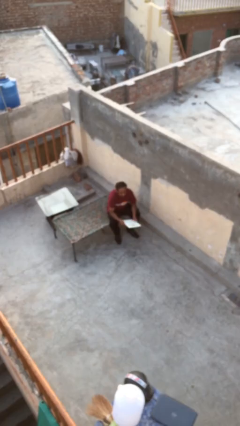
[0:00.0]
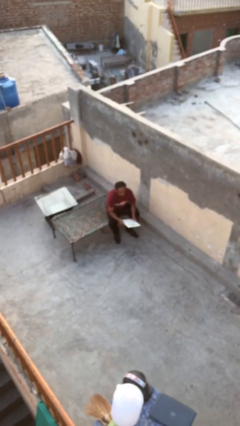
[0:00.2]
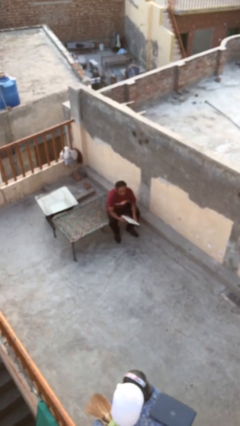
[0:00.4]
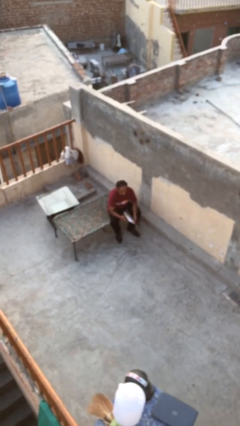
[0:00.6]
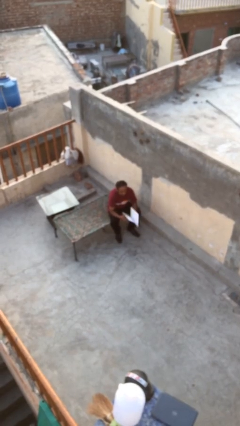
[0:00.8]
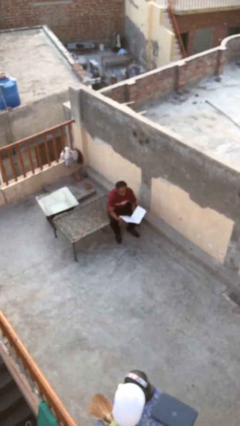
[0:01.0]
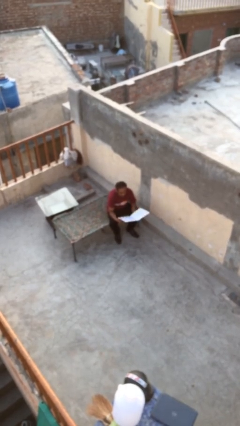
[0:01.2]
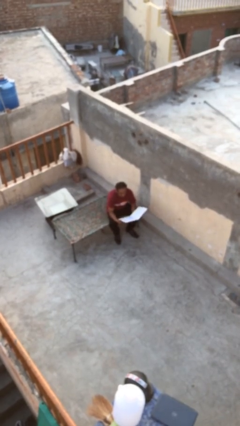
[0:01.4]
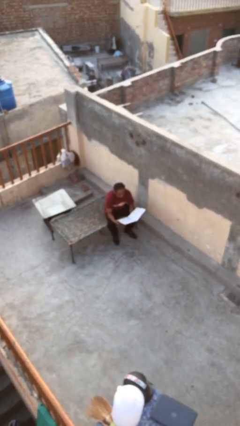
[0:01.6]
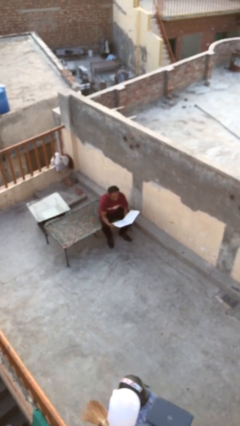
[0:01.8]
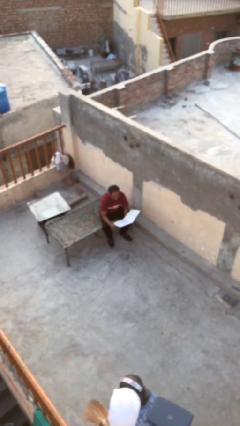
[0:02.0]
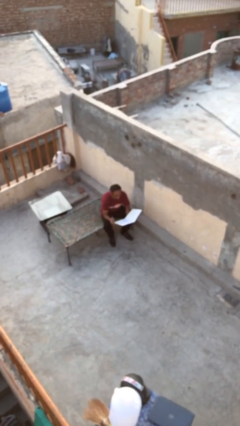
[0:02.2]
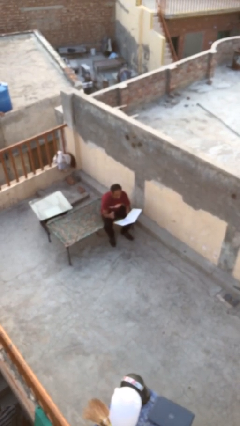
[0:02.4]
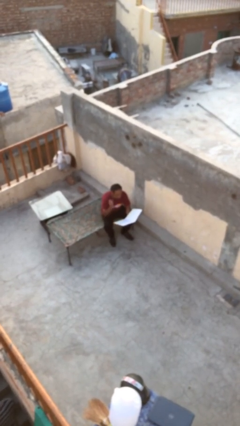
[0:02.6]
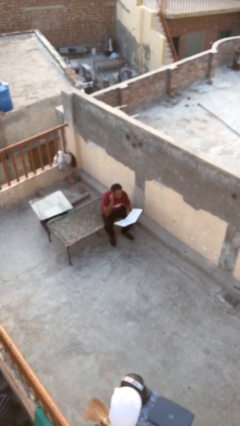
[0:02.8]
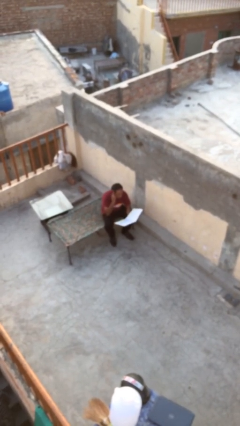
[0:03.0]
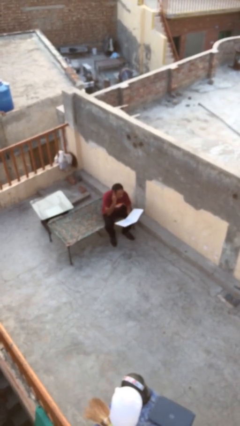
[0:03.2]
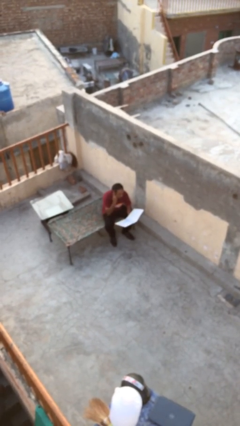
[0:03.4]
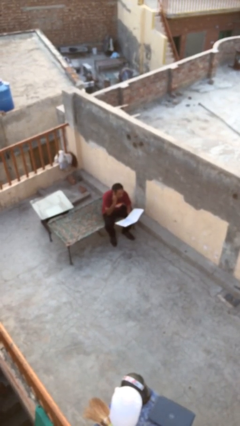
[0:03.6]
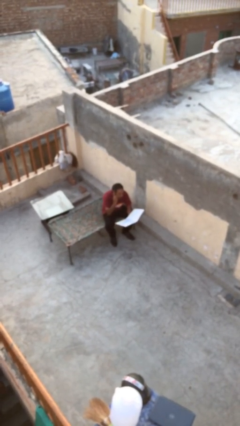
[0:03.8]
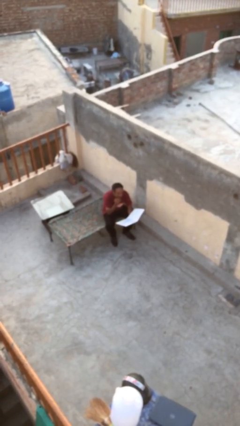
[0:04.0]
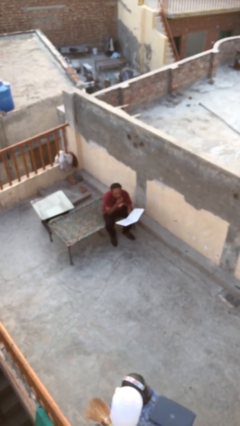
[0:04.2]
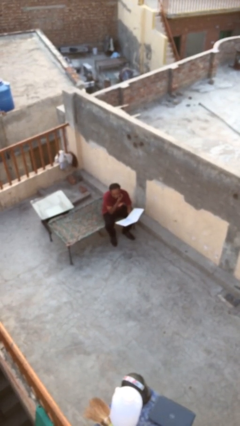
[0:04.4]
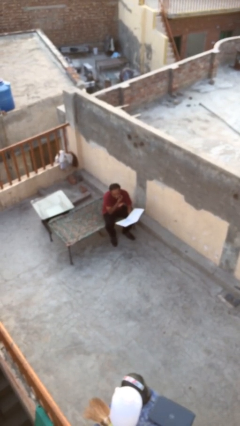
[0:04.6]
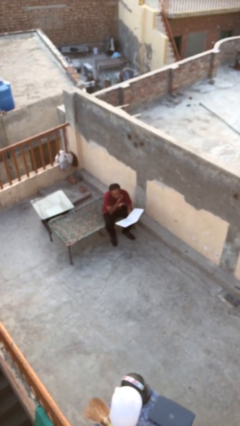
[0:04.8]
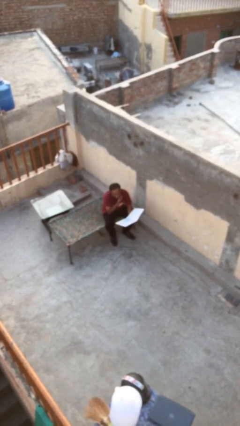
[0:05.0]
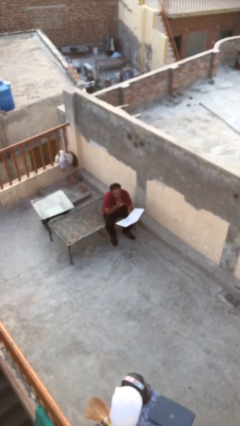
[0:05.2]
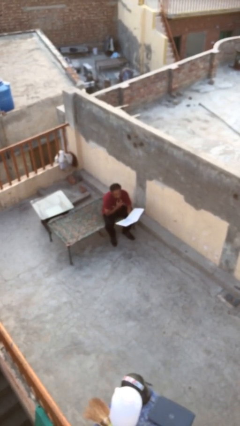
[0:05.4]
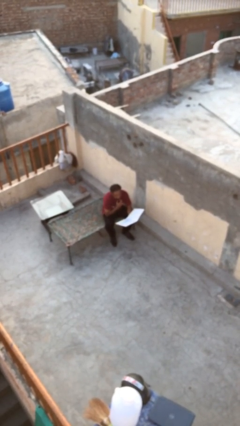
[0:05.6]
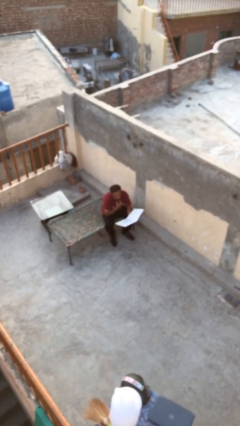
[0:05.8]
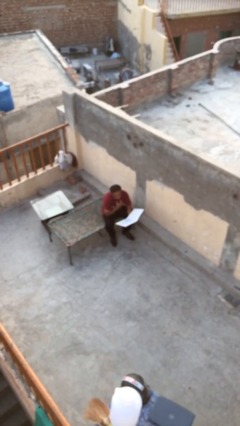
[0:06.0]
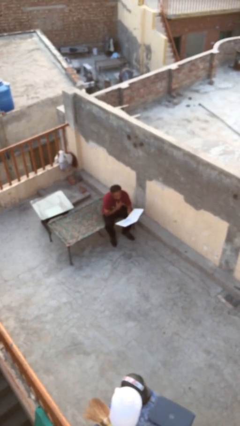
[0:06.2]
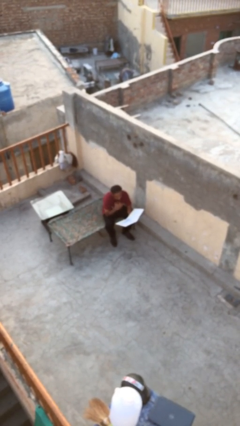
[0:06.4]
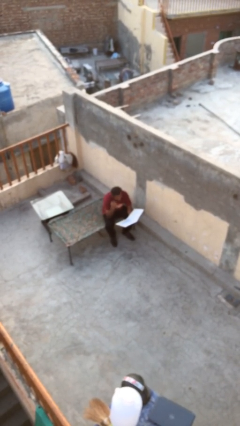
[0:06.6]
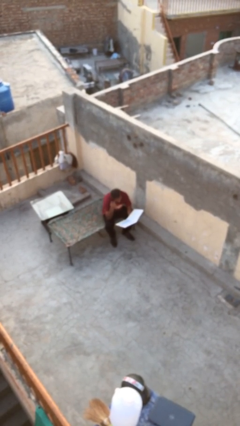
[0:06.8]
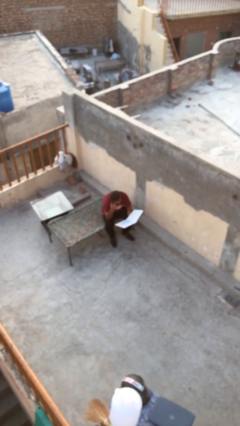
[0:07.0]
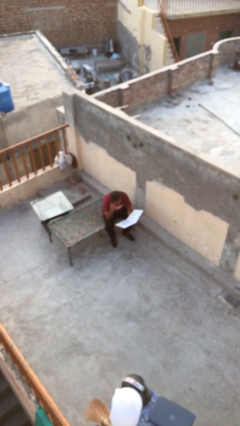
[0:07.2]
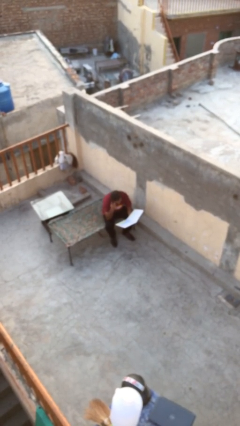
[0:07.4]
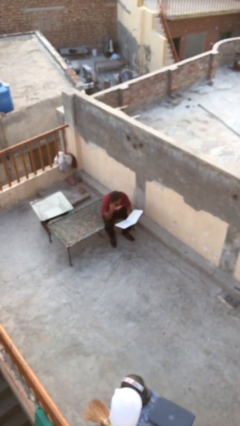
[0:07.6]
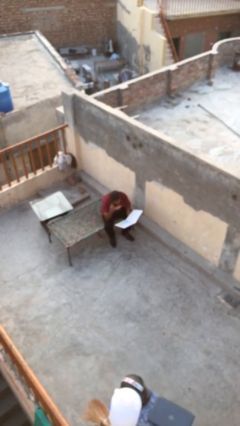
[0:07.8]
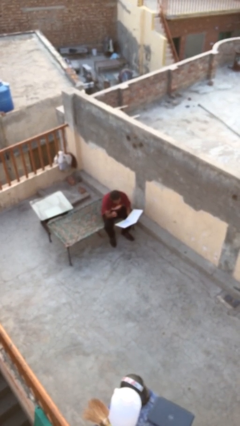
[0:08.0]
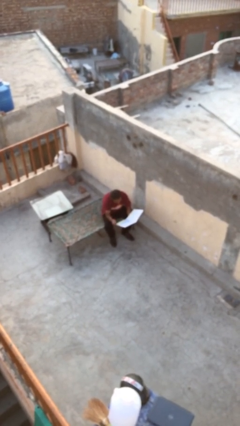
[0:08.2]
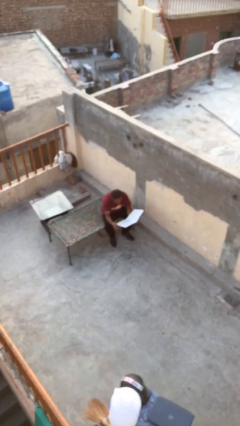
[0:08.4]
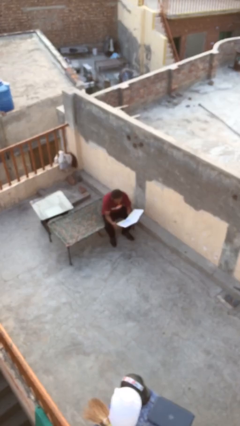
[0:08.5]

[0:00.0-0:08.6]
person reads document

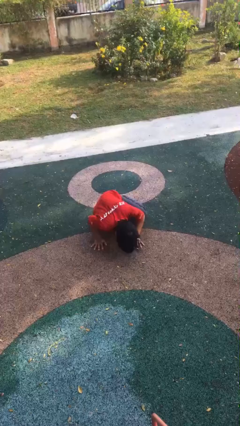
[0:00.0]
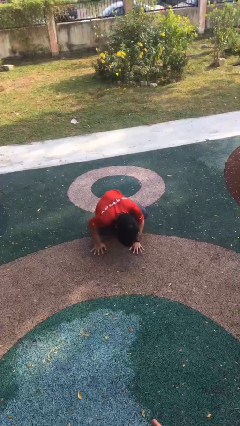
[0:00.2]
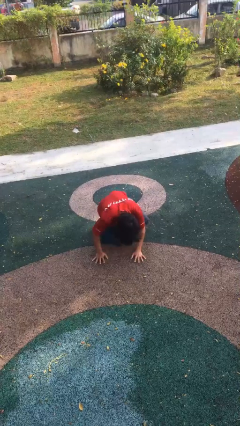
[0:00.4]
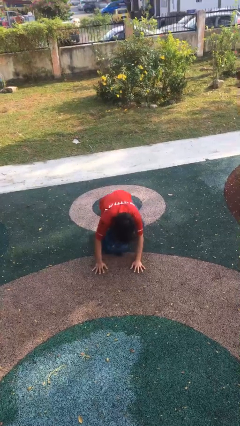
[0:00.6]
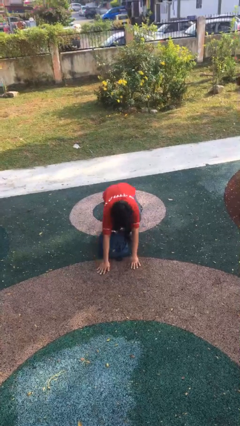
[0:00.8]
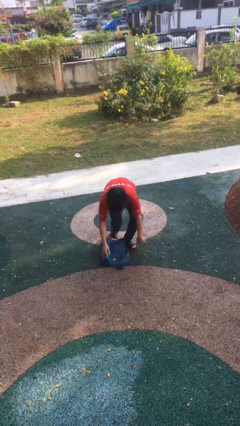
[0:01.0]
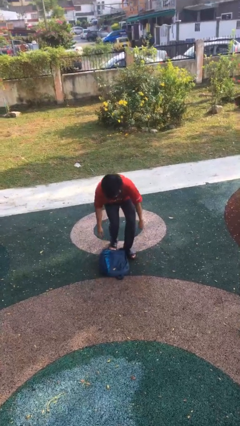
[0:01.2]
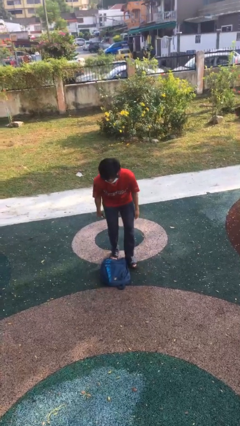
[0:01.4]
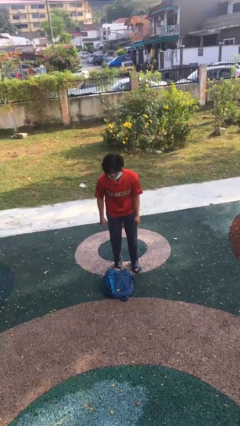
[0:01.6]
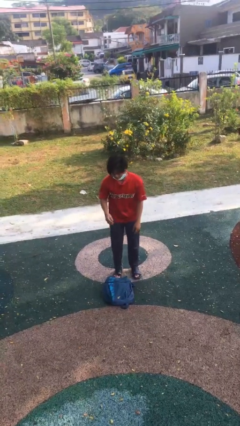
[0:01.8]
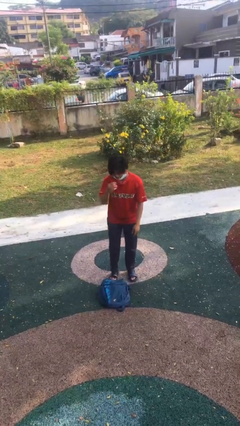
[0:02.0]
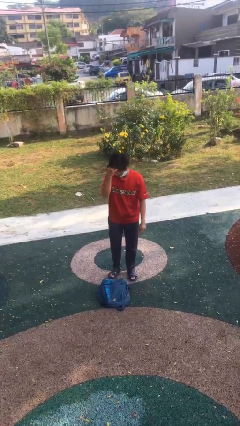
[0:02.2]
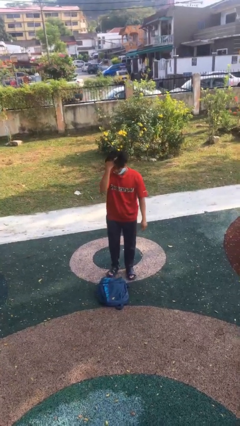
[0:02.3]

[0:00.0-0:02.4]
person stands up from floor

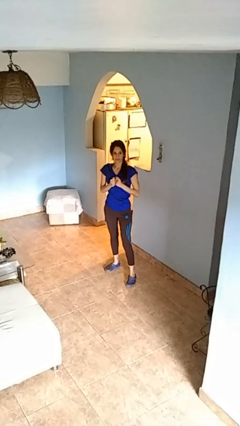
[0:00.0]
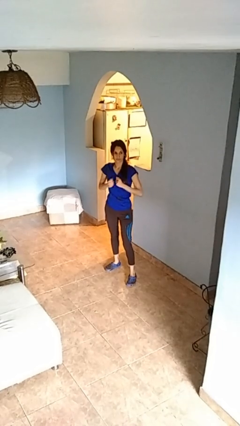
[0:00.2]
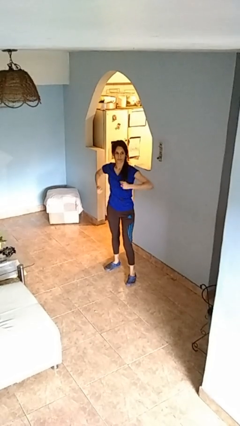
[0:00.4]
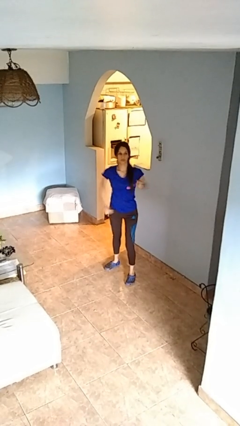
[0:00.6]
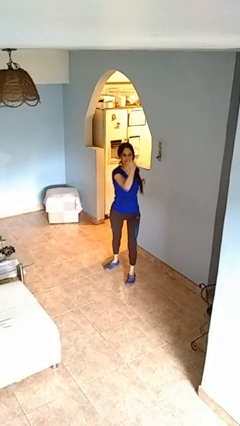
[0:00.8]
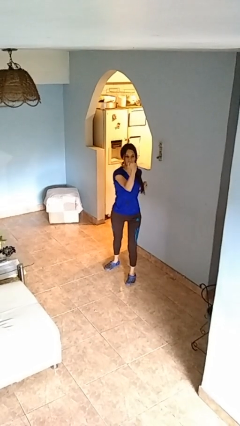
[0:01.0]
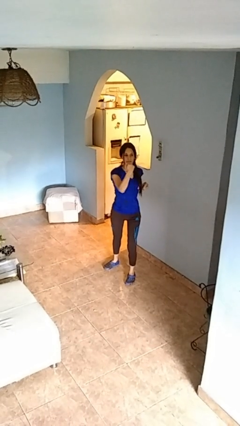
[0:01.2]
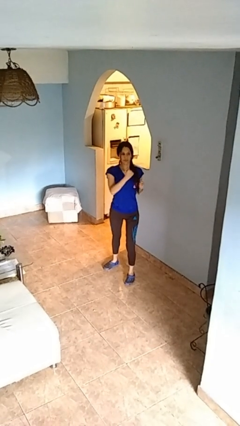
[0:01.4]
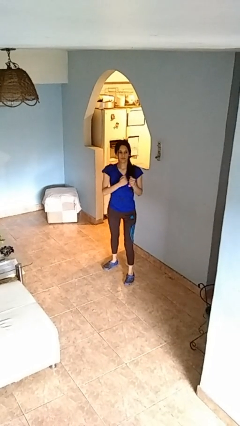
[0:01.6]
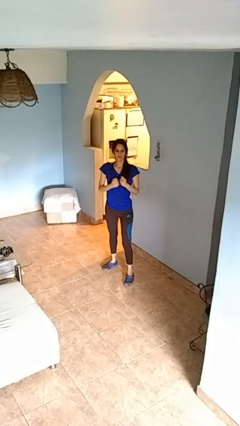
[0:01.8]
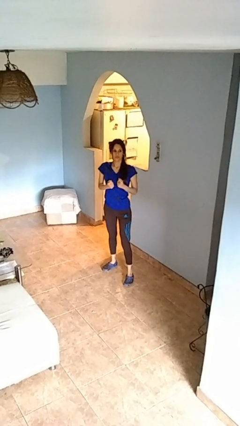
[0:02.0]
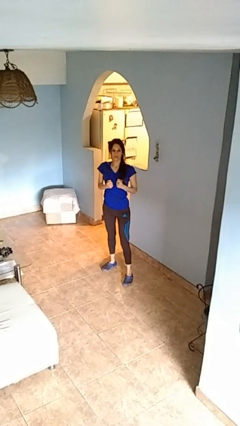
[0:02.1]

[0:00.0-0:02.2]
person punches

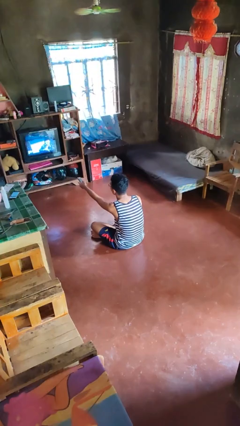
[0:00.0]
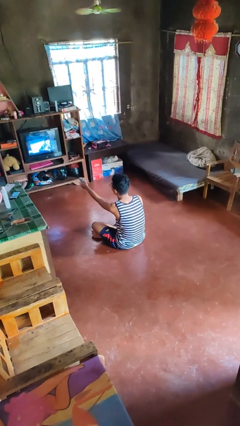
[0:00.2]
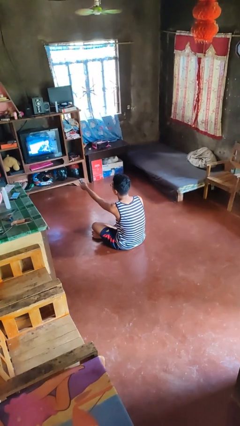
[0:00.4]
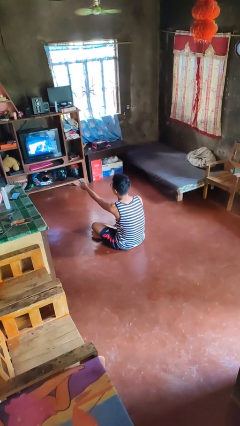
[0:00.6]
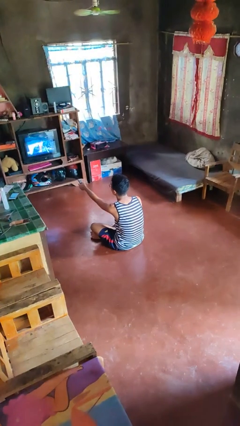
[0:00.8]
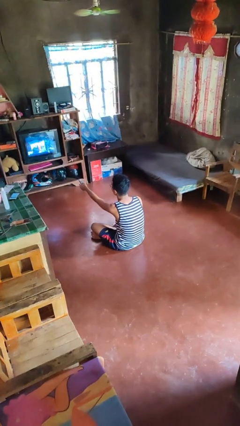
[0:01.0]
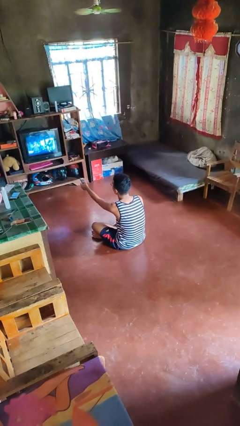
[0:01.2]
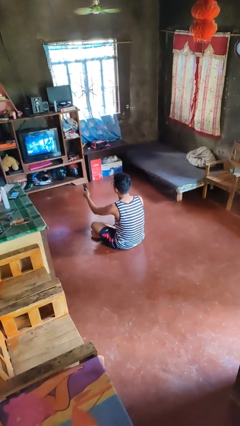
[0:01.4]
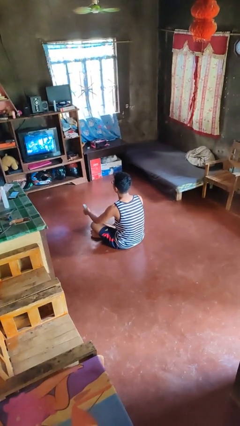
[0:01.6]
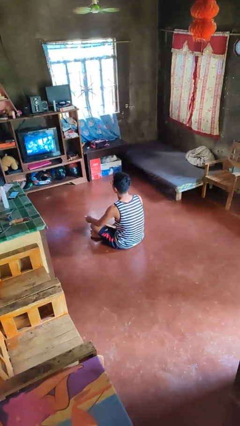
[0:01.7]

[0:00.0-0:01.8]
person uses television remote

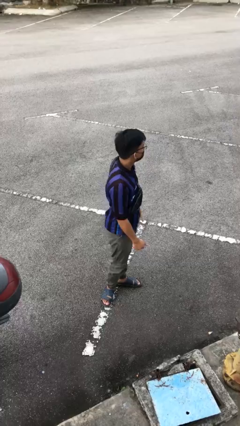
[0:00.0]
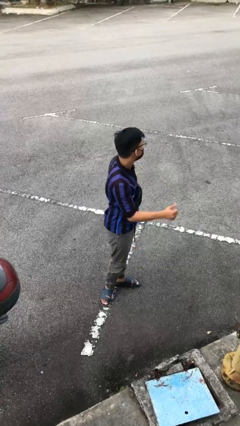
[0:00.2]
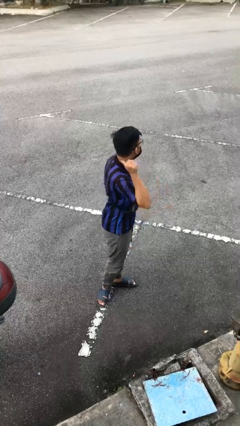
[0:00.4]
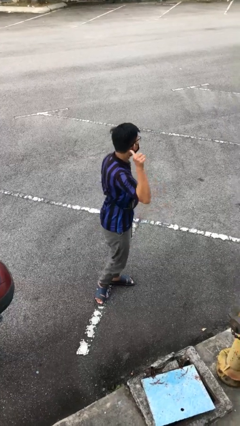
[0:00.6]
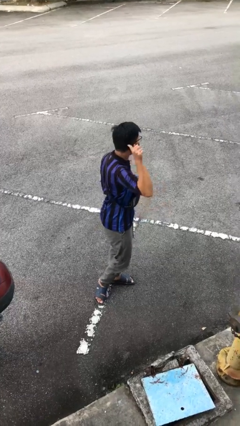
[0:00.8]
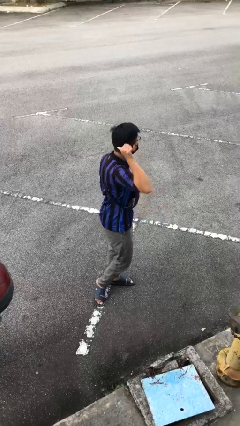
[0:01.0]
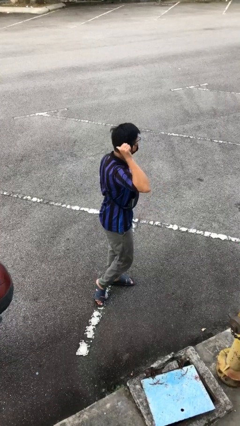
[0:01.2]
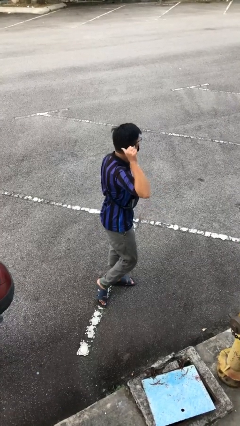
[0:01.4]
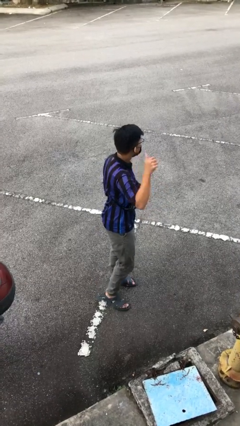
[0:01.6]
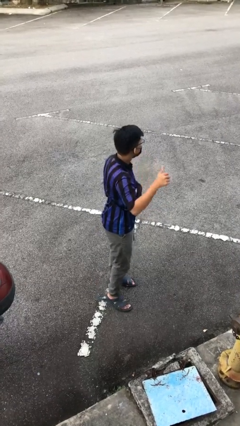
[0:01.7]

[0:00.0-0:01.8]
person gestures behind me

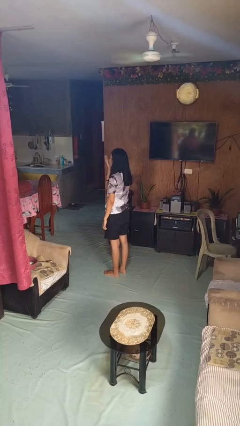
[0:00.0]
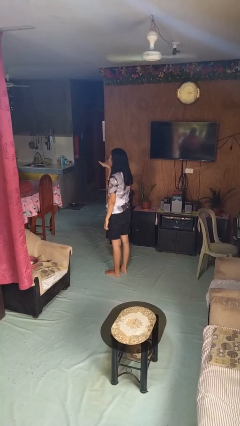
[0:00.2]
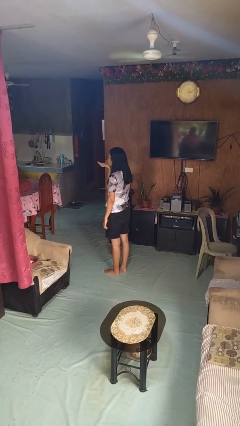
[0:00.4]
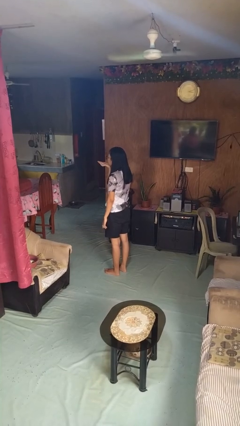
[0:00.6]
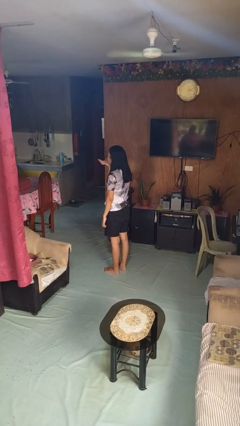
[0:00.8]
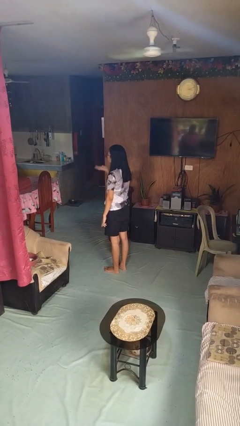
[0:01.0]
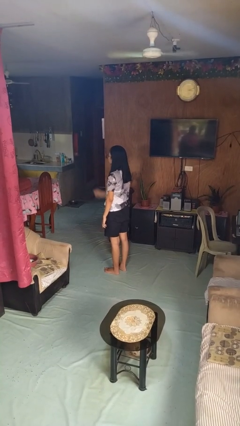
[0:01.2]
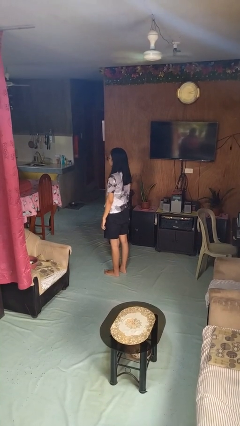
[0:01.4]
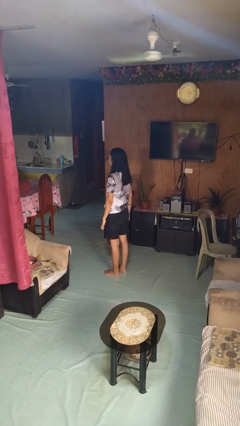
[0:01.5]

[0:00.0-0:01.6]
person gestures blow kiss
